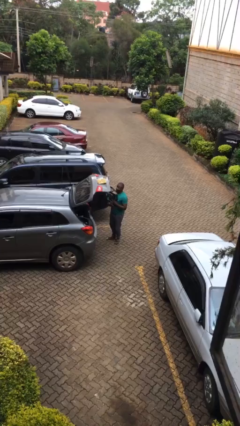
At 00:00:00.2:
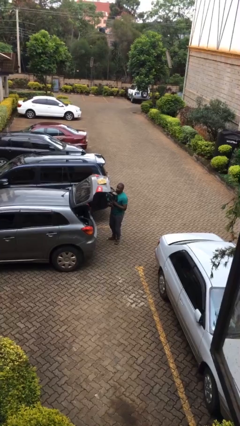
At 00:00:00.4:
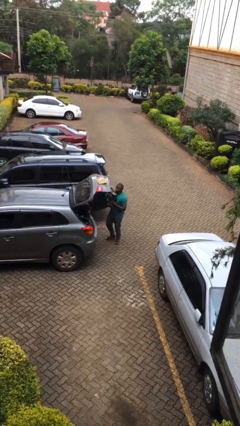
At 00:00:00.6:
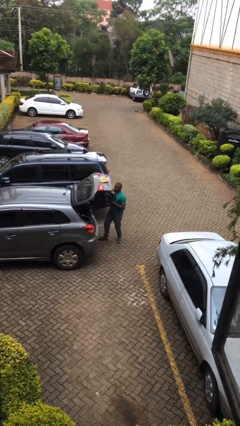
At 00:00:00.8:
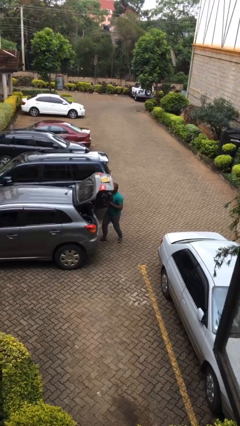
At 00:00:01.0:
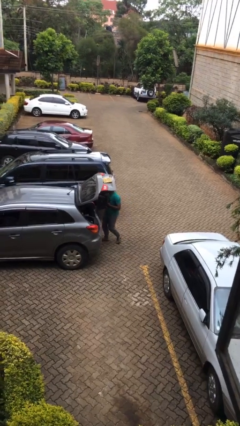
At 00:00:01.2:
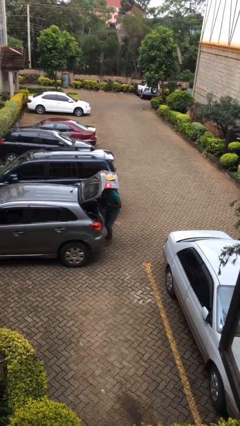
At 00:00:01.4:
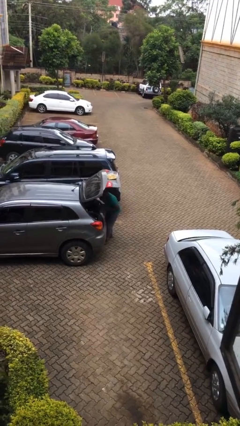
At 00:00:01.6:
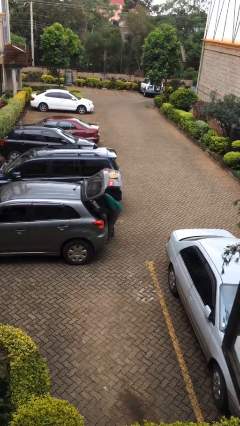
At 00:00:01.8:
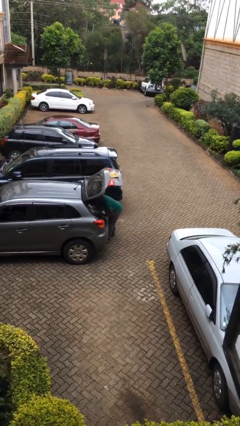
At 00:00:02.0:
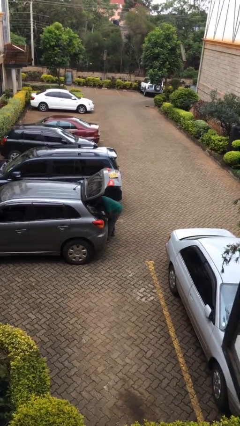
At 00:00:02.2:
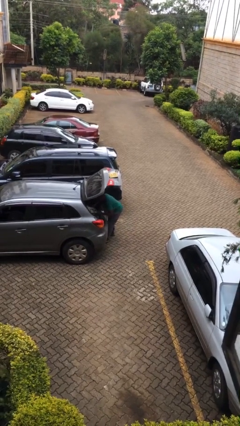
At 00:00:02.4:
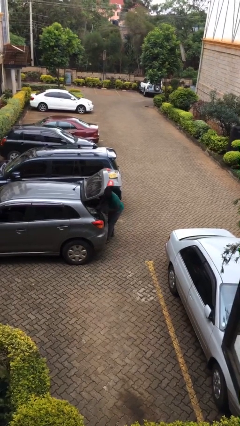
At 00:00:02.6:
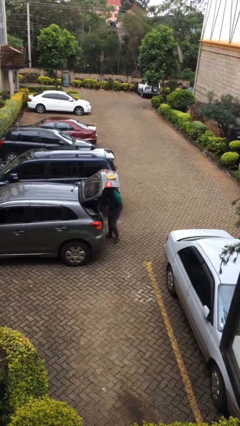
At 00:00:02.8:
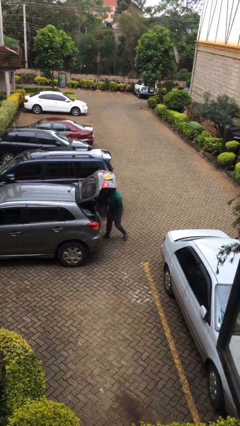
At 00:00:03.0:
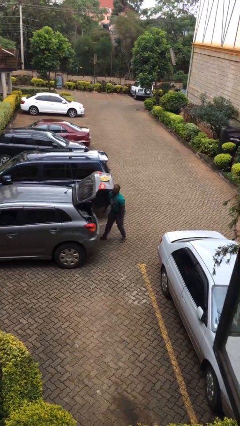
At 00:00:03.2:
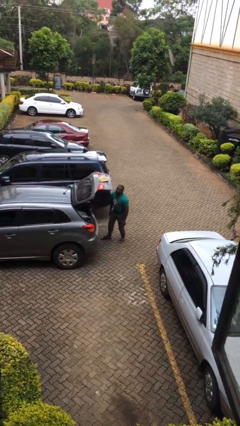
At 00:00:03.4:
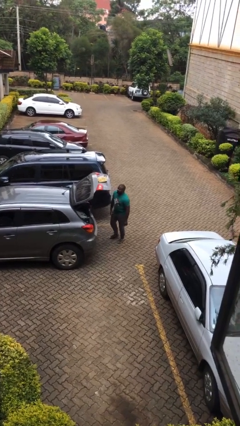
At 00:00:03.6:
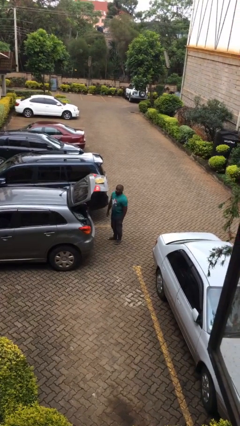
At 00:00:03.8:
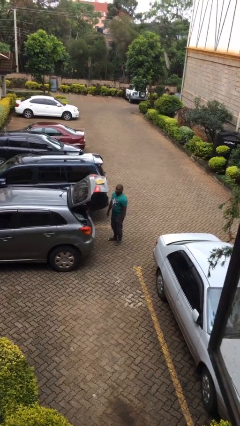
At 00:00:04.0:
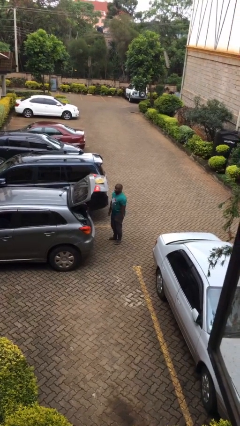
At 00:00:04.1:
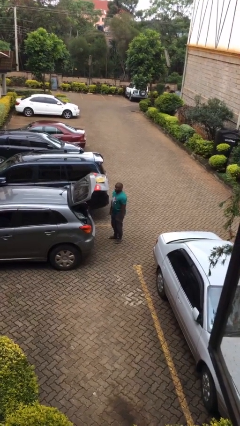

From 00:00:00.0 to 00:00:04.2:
person loads car

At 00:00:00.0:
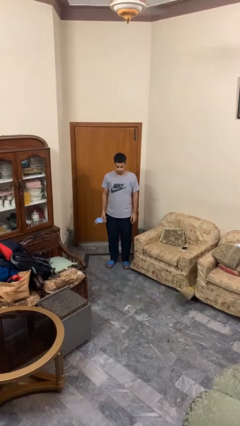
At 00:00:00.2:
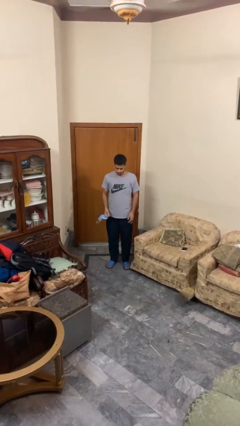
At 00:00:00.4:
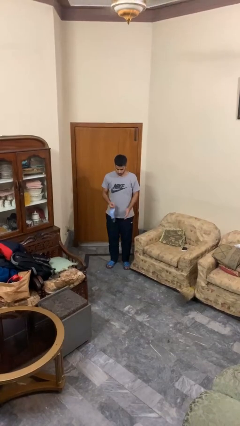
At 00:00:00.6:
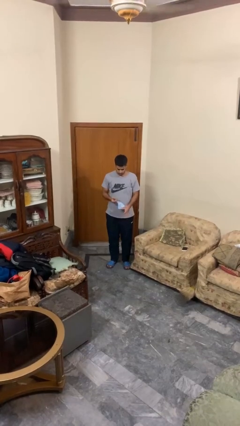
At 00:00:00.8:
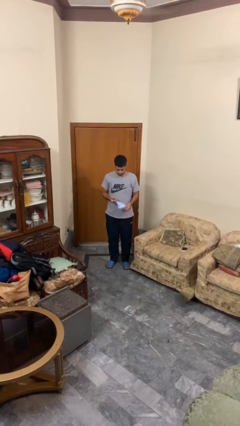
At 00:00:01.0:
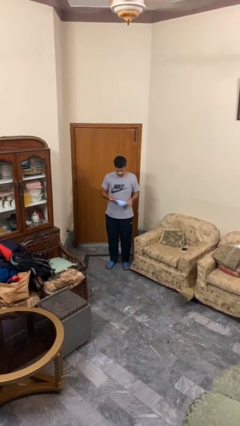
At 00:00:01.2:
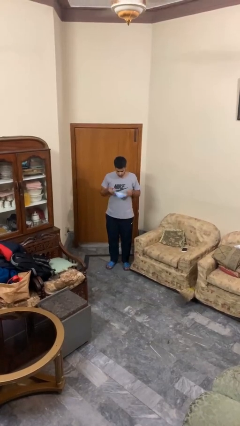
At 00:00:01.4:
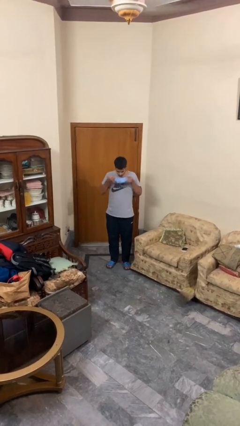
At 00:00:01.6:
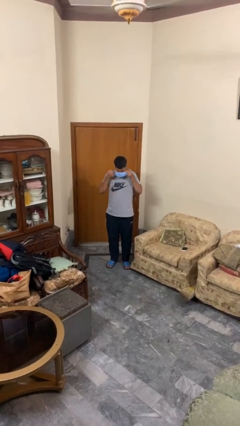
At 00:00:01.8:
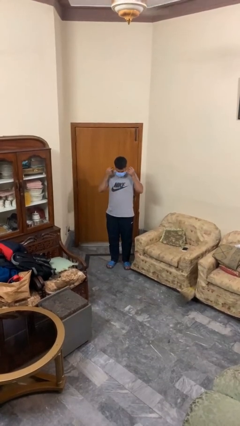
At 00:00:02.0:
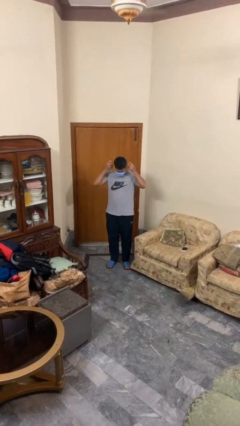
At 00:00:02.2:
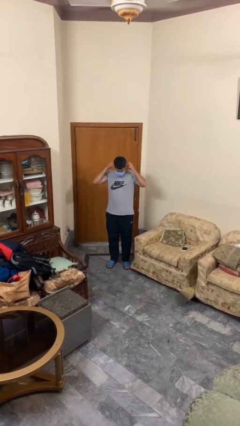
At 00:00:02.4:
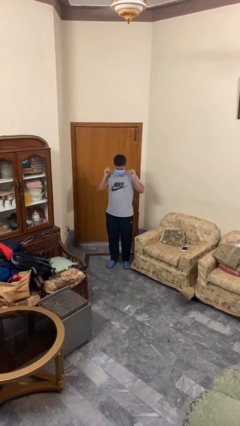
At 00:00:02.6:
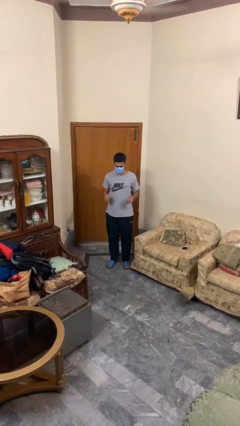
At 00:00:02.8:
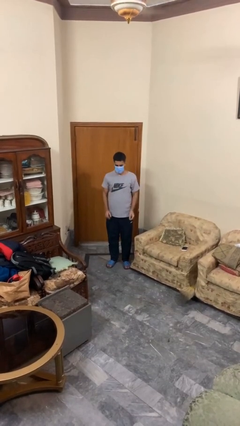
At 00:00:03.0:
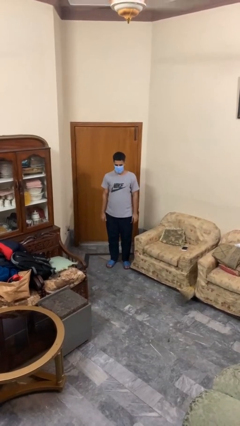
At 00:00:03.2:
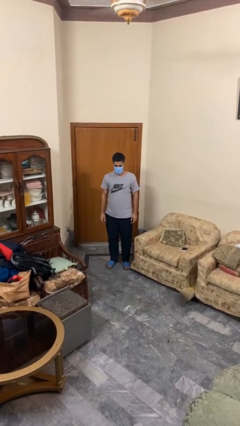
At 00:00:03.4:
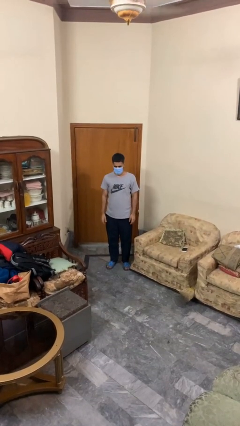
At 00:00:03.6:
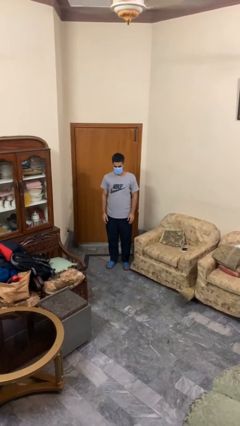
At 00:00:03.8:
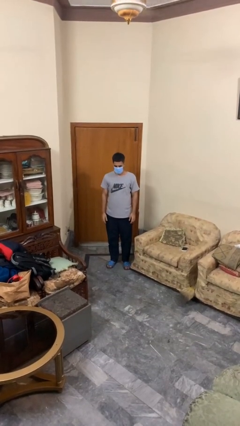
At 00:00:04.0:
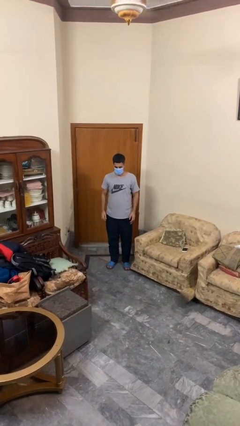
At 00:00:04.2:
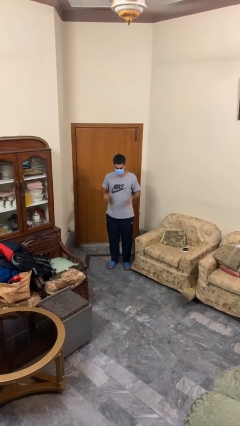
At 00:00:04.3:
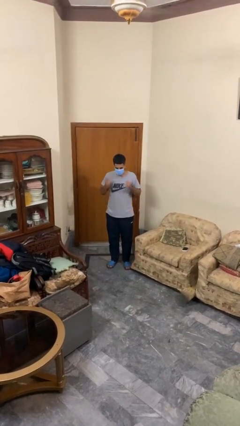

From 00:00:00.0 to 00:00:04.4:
person puts on facemask

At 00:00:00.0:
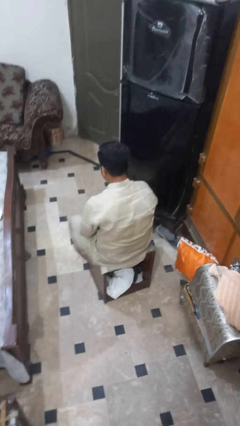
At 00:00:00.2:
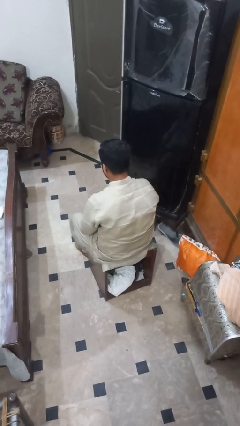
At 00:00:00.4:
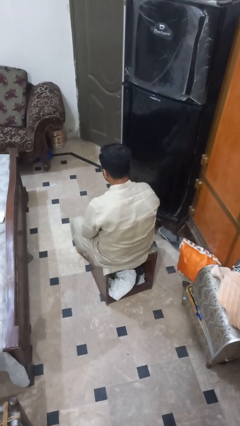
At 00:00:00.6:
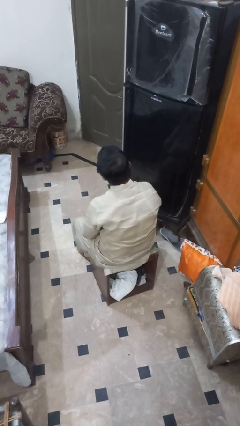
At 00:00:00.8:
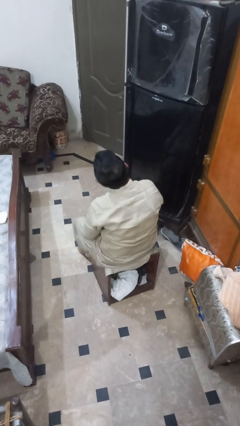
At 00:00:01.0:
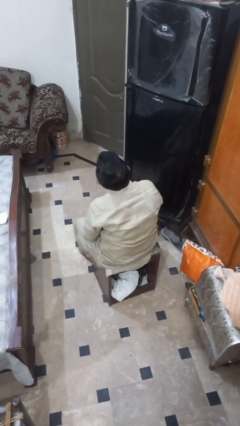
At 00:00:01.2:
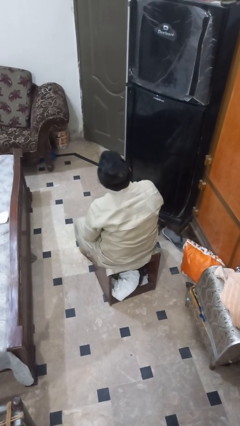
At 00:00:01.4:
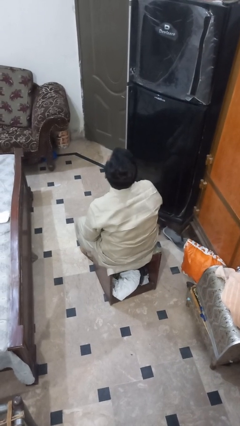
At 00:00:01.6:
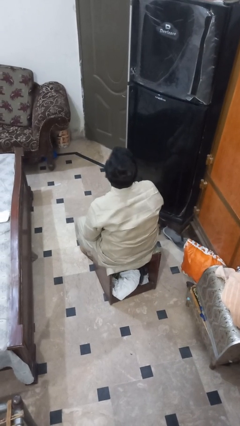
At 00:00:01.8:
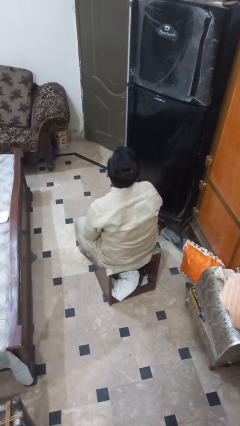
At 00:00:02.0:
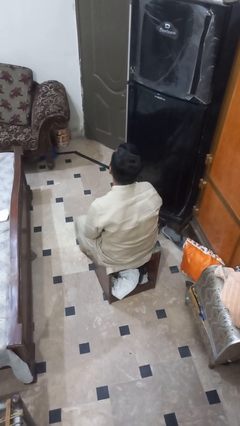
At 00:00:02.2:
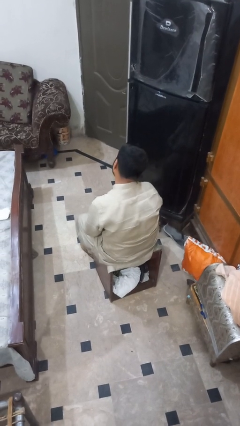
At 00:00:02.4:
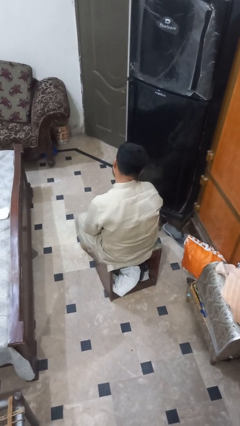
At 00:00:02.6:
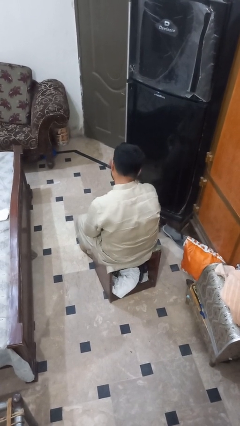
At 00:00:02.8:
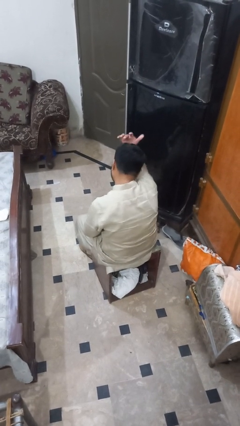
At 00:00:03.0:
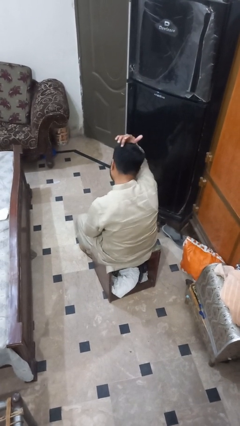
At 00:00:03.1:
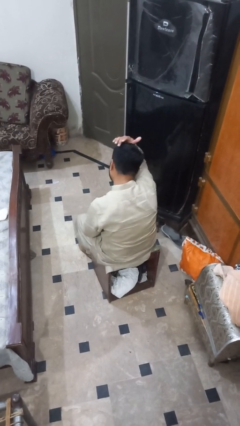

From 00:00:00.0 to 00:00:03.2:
person sticks out tongue

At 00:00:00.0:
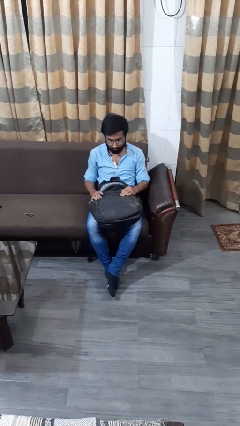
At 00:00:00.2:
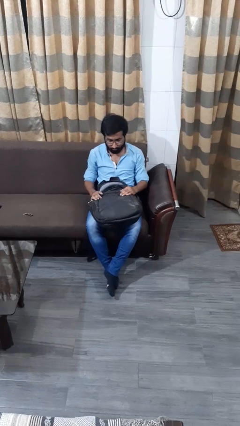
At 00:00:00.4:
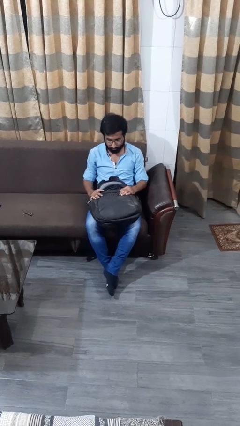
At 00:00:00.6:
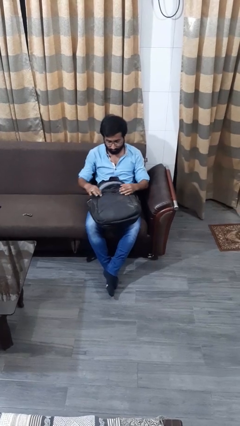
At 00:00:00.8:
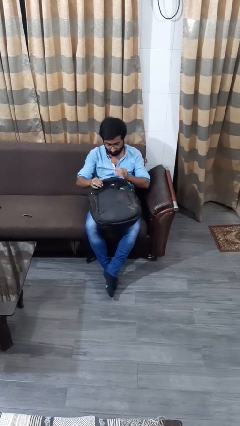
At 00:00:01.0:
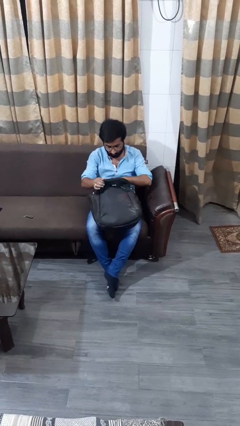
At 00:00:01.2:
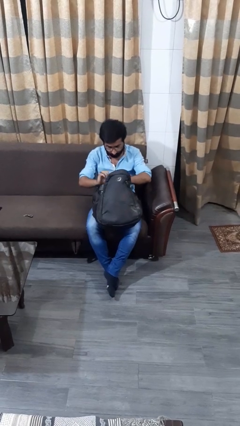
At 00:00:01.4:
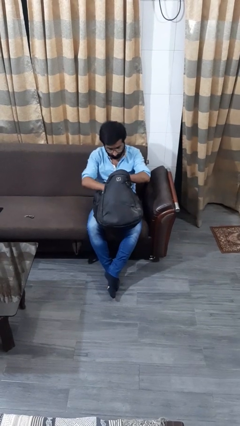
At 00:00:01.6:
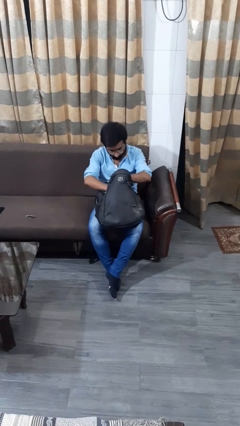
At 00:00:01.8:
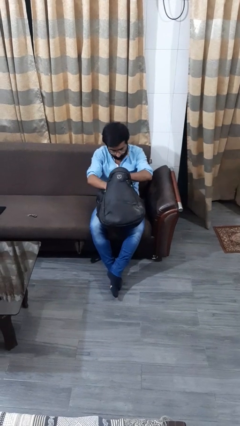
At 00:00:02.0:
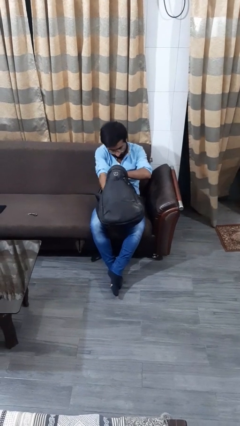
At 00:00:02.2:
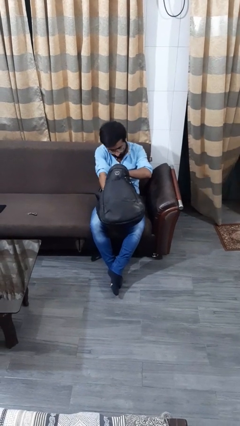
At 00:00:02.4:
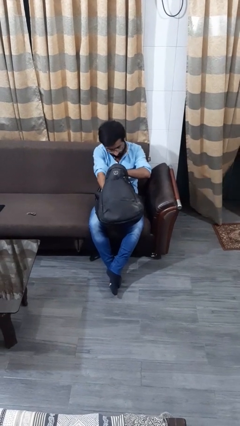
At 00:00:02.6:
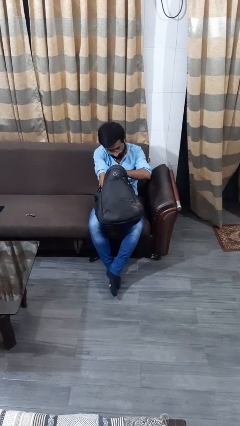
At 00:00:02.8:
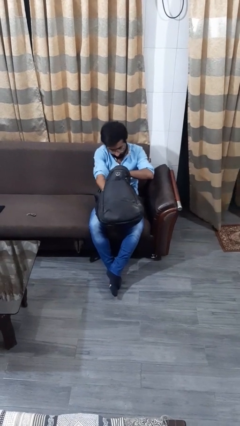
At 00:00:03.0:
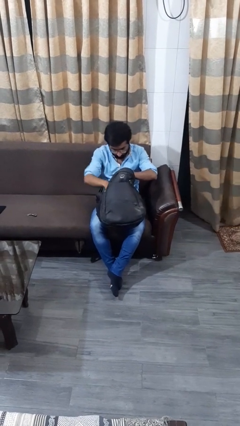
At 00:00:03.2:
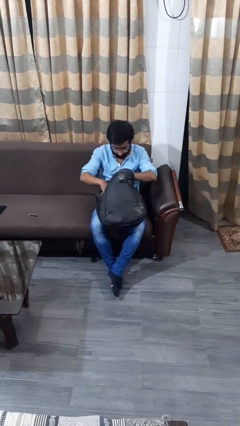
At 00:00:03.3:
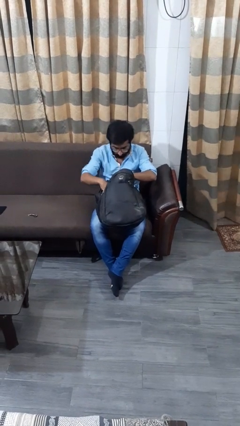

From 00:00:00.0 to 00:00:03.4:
person searches in backpack

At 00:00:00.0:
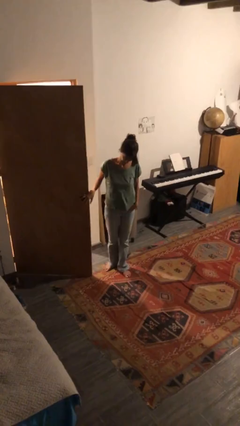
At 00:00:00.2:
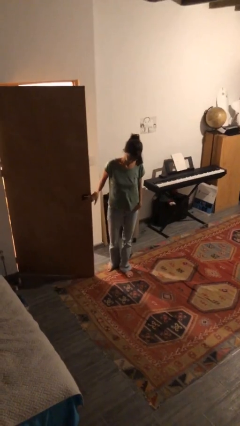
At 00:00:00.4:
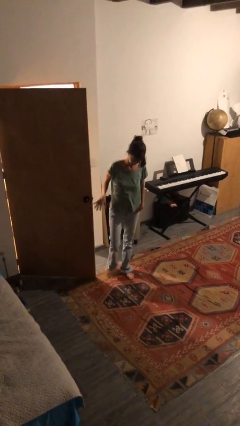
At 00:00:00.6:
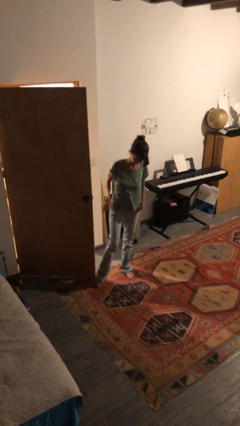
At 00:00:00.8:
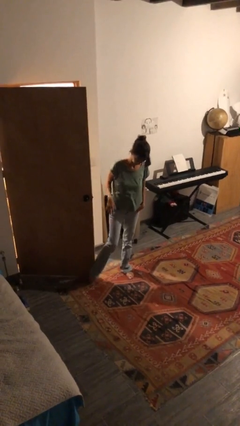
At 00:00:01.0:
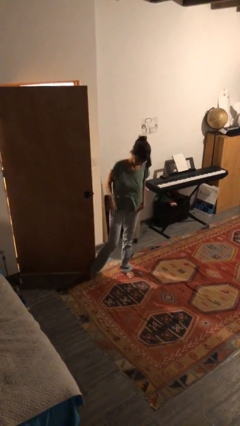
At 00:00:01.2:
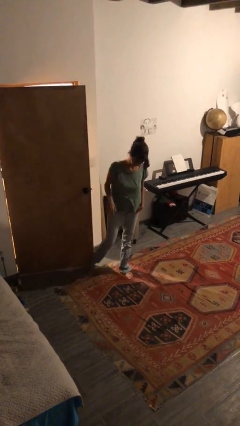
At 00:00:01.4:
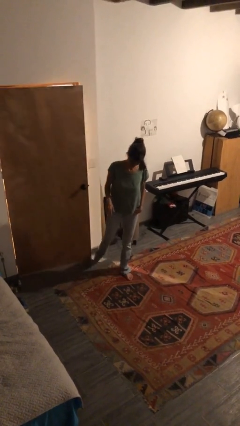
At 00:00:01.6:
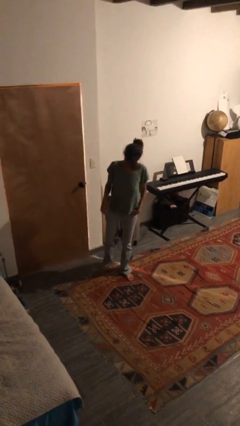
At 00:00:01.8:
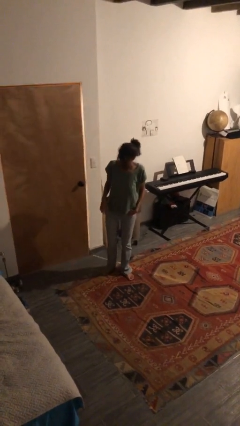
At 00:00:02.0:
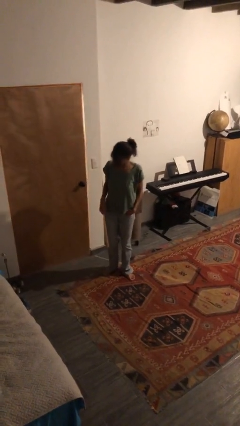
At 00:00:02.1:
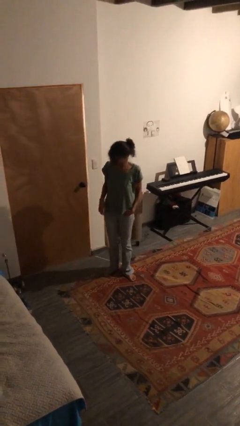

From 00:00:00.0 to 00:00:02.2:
person closes door with foot
